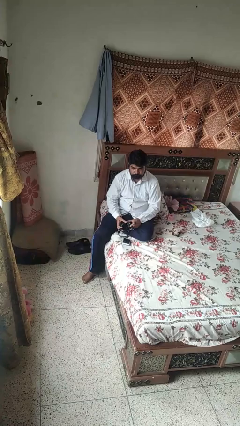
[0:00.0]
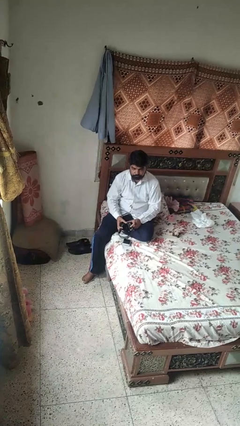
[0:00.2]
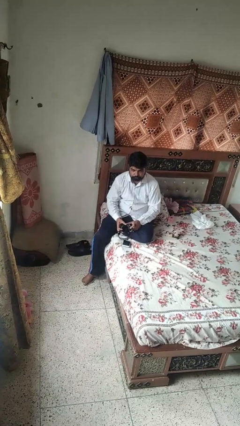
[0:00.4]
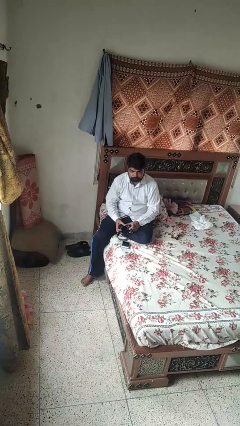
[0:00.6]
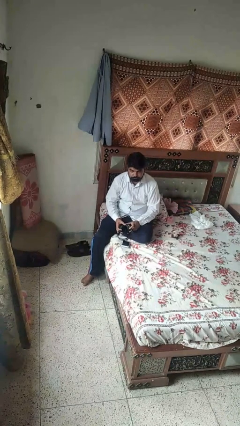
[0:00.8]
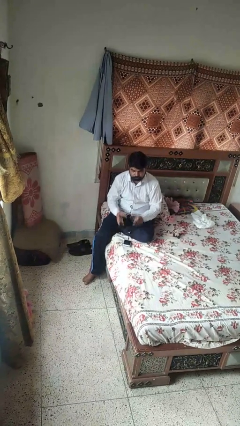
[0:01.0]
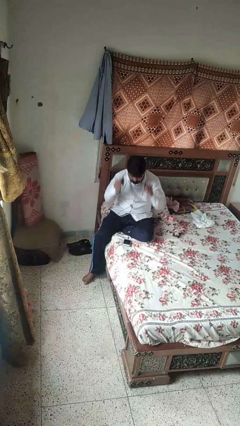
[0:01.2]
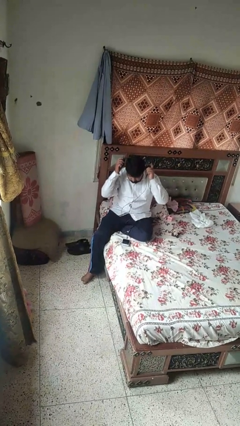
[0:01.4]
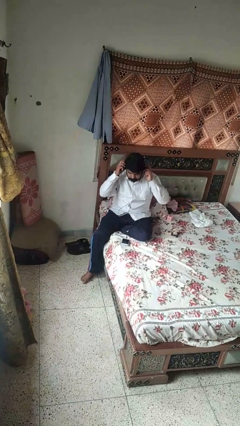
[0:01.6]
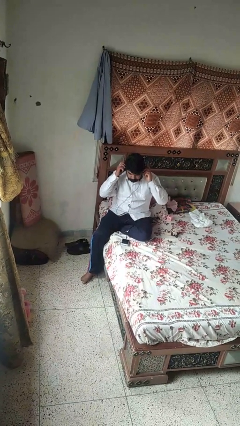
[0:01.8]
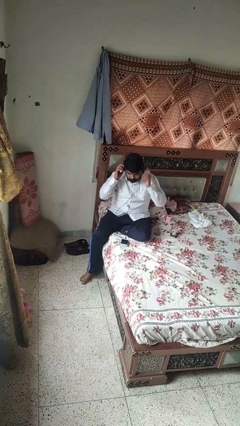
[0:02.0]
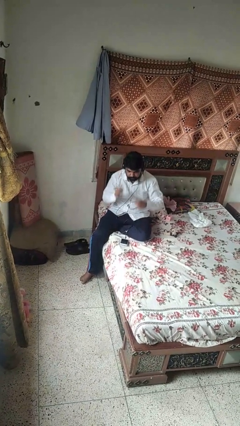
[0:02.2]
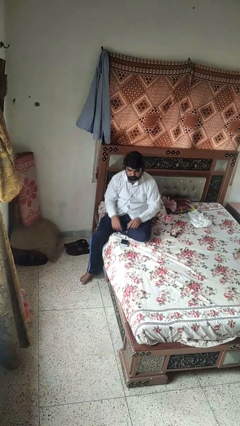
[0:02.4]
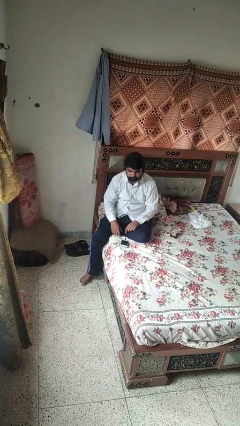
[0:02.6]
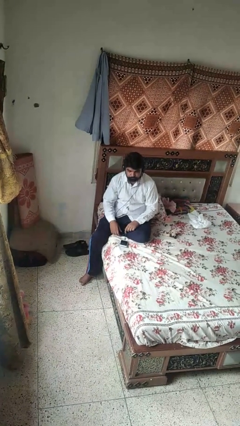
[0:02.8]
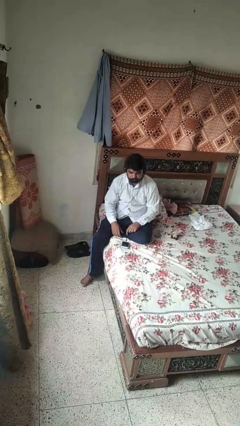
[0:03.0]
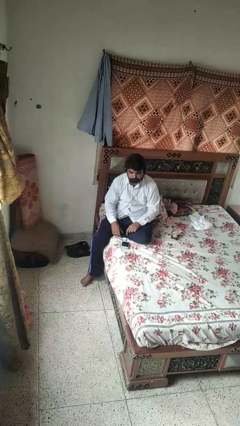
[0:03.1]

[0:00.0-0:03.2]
person puts on headphones

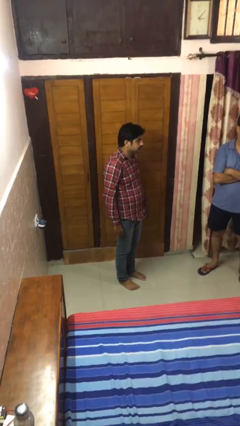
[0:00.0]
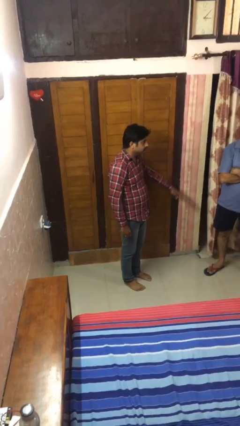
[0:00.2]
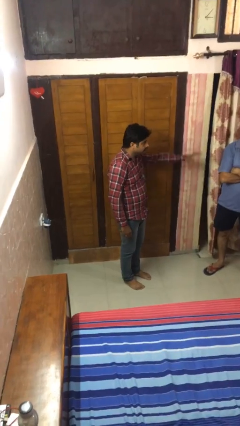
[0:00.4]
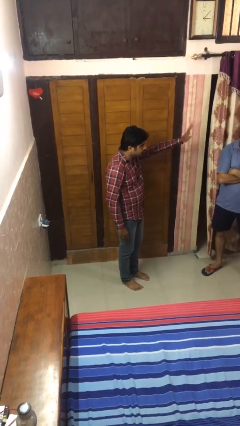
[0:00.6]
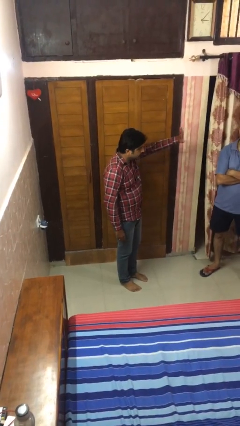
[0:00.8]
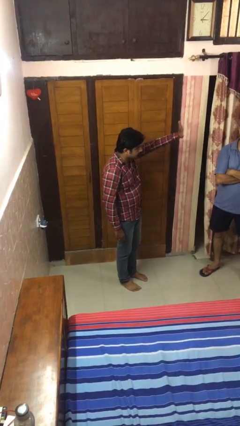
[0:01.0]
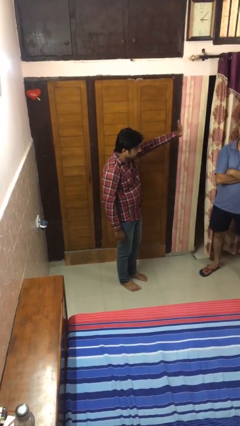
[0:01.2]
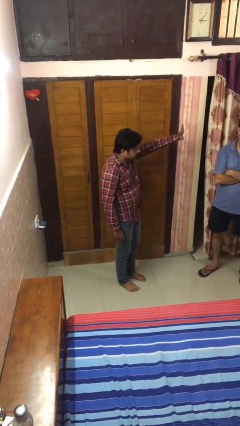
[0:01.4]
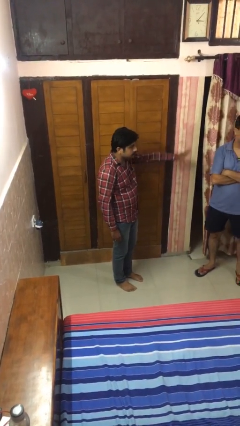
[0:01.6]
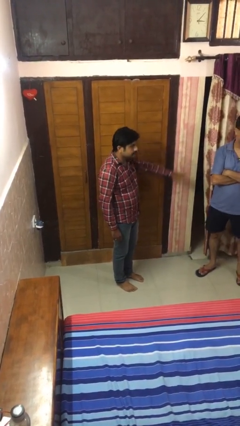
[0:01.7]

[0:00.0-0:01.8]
person waves at person

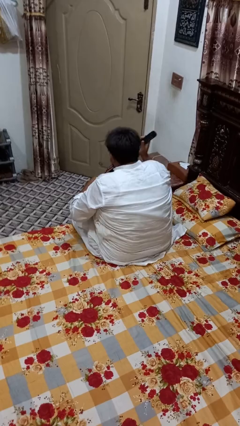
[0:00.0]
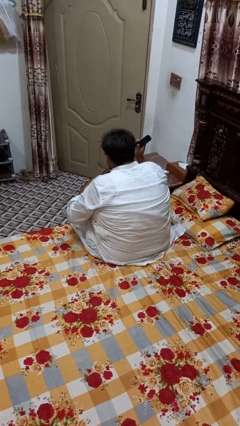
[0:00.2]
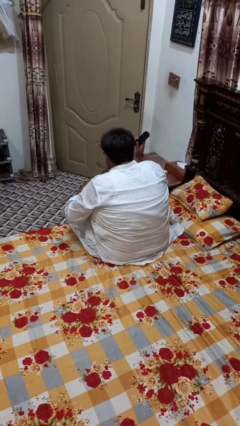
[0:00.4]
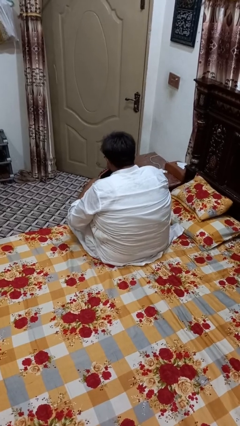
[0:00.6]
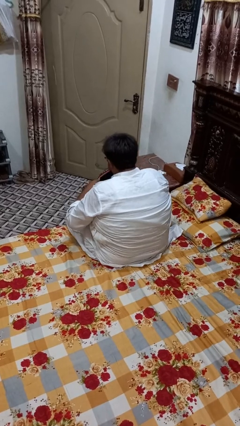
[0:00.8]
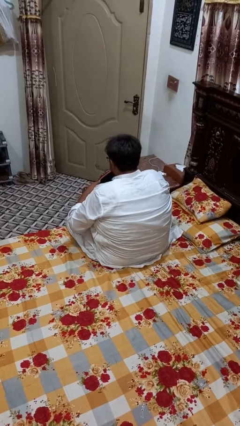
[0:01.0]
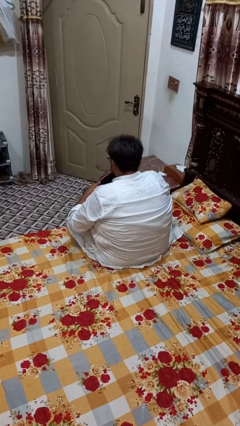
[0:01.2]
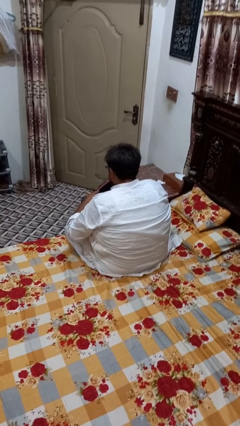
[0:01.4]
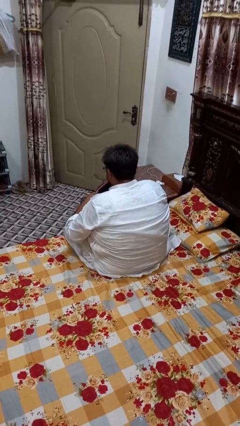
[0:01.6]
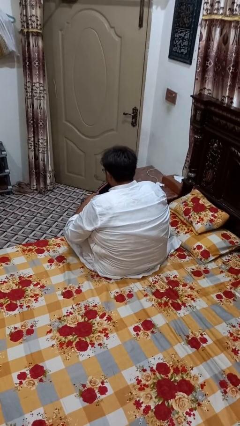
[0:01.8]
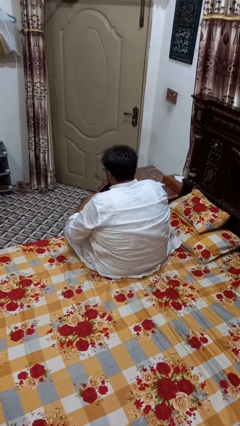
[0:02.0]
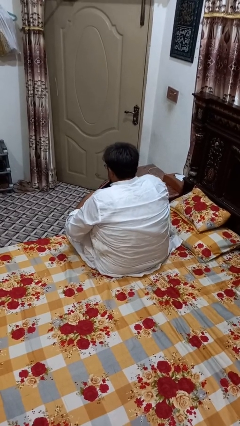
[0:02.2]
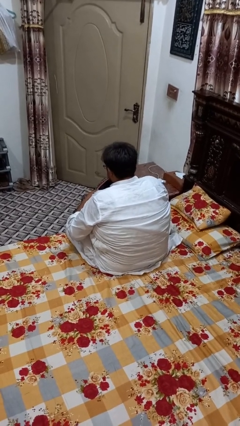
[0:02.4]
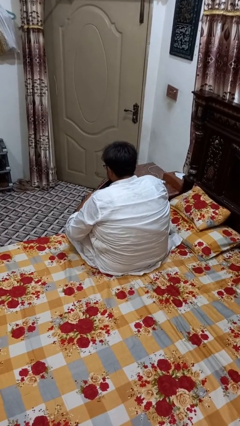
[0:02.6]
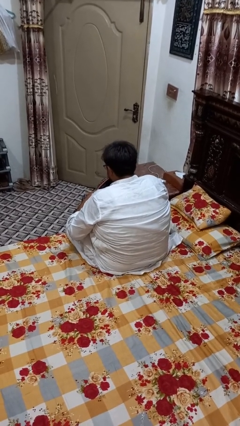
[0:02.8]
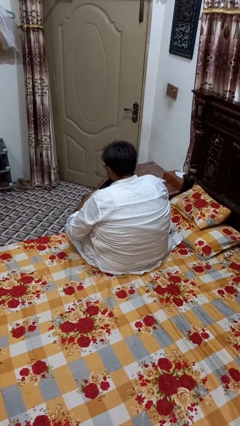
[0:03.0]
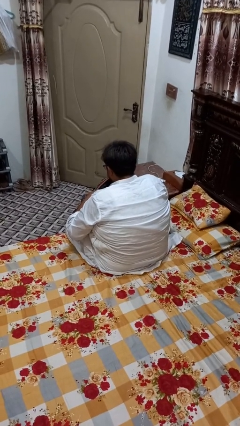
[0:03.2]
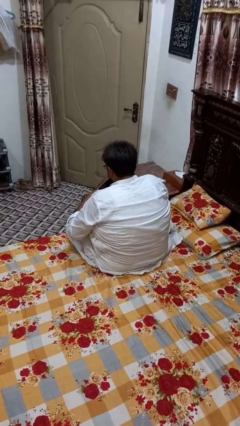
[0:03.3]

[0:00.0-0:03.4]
person puts object into bag

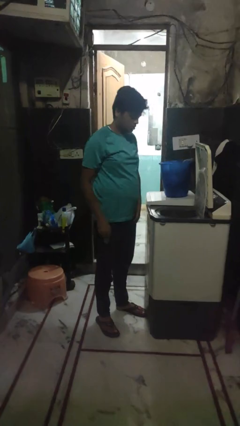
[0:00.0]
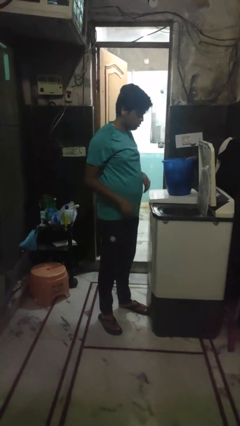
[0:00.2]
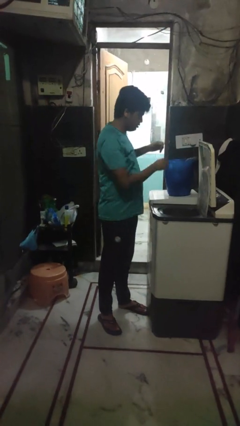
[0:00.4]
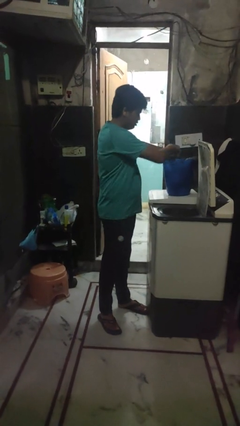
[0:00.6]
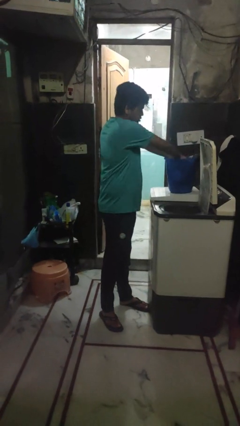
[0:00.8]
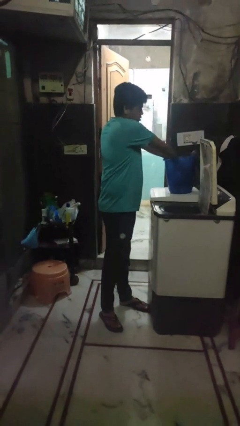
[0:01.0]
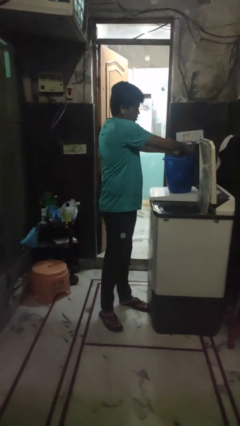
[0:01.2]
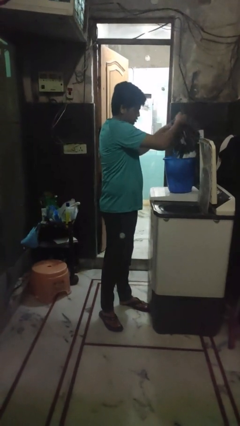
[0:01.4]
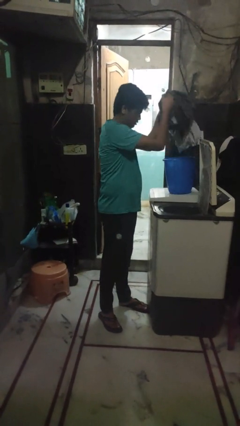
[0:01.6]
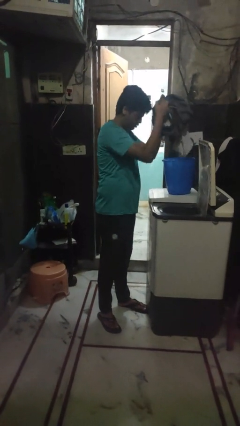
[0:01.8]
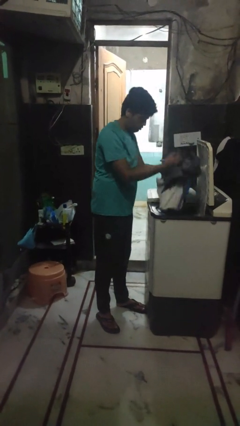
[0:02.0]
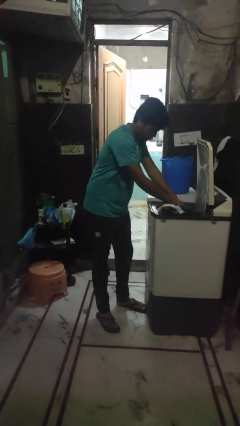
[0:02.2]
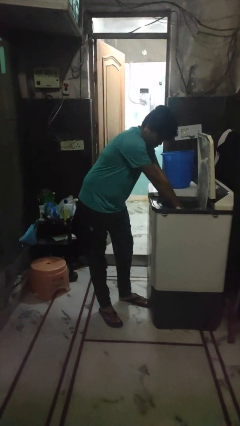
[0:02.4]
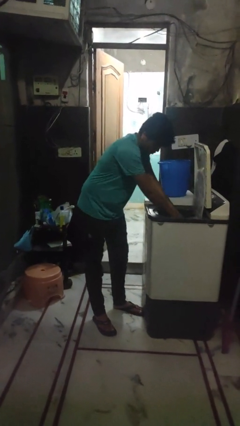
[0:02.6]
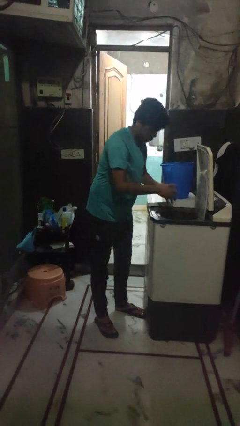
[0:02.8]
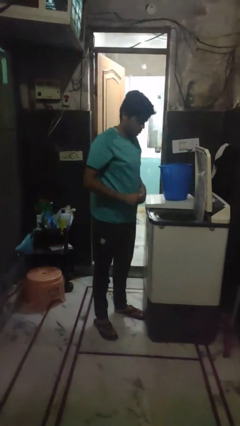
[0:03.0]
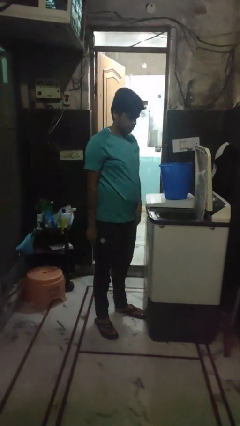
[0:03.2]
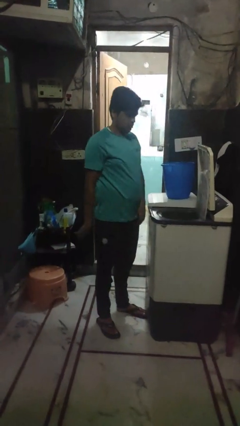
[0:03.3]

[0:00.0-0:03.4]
person loads clotheswasher

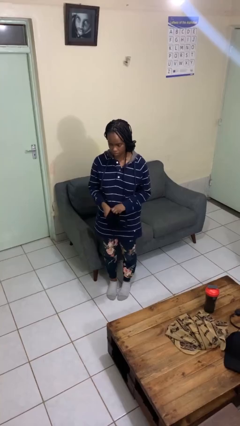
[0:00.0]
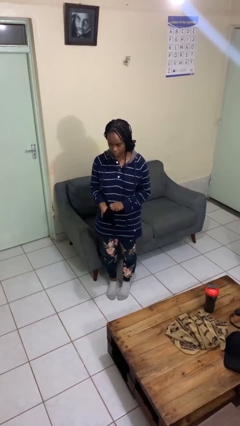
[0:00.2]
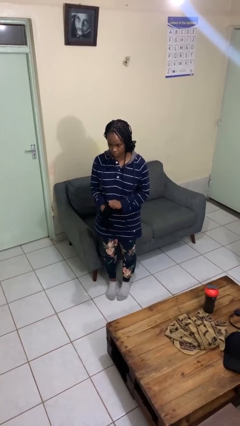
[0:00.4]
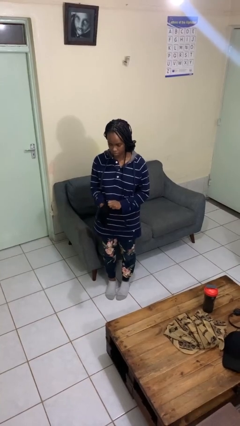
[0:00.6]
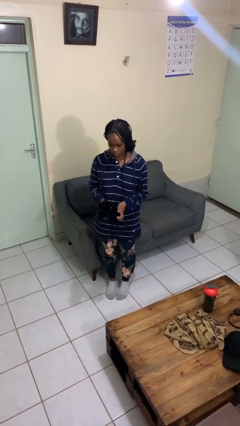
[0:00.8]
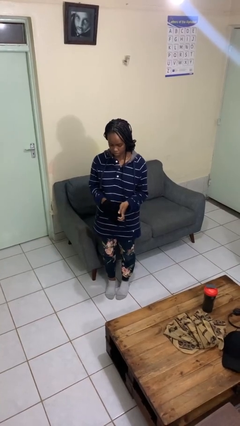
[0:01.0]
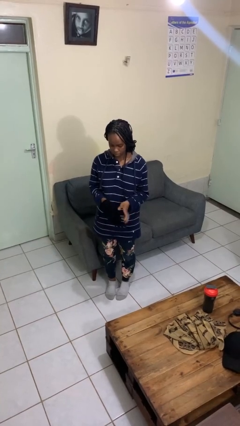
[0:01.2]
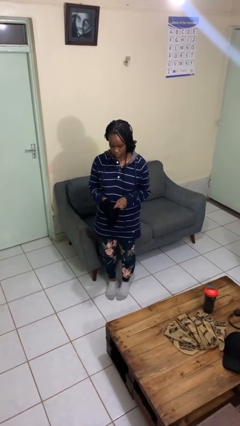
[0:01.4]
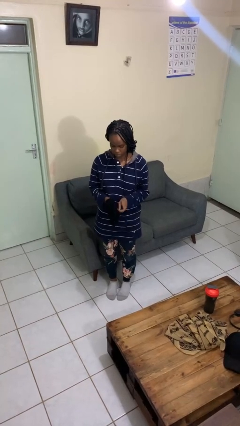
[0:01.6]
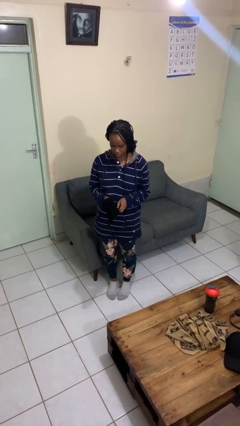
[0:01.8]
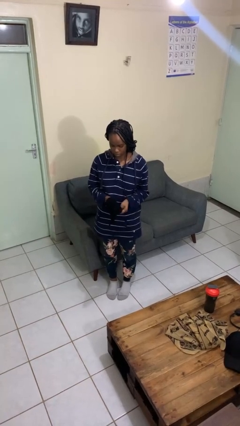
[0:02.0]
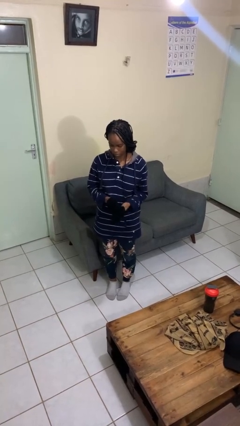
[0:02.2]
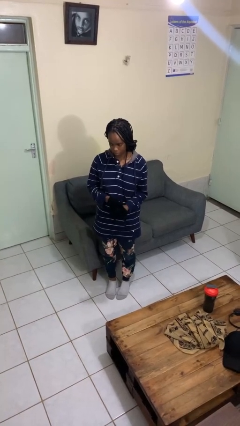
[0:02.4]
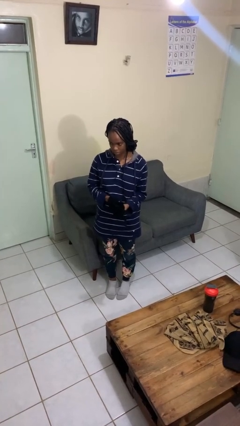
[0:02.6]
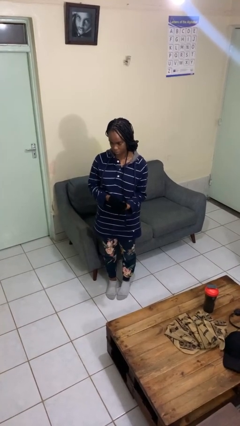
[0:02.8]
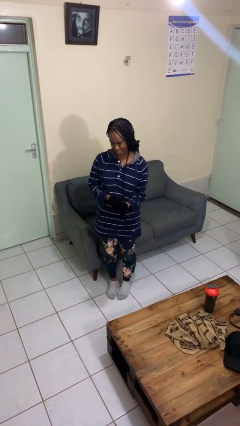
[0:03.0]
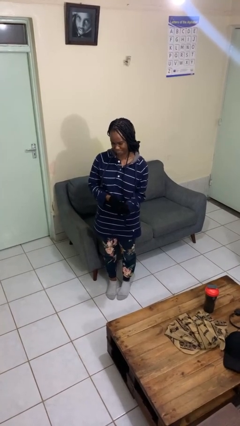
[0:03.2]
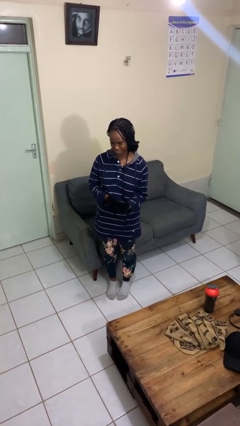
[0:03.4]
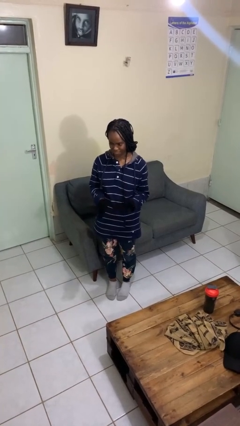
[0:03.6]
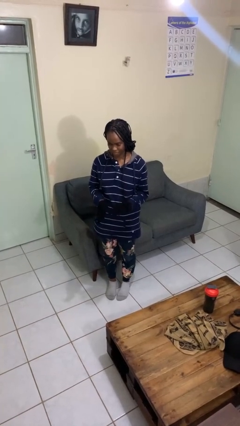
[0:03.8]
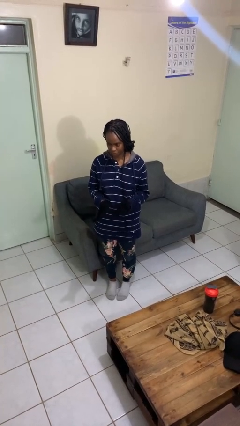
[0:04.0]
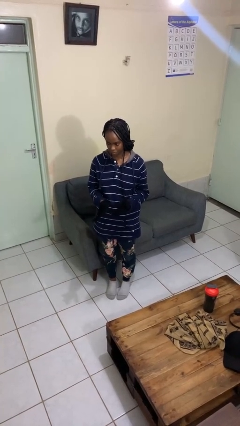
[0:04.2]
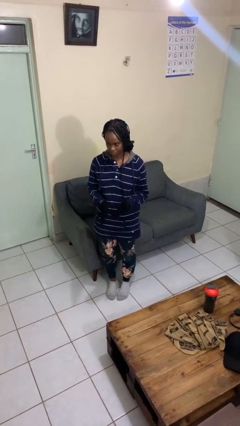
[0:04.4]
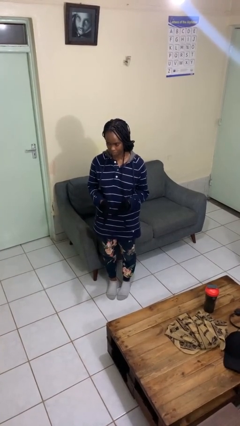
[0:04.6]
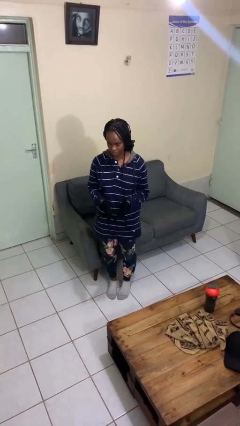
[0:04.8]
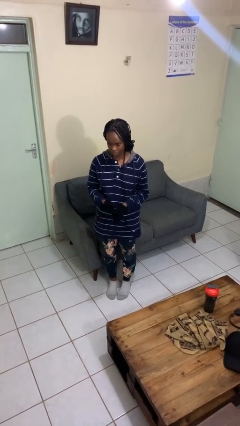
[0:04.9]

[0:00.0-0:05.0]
person puts on gloves

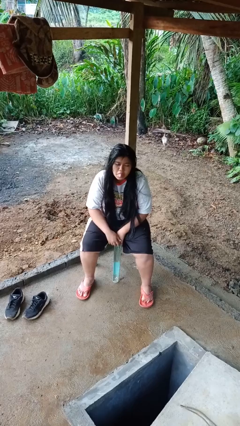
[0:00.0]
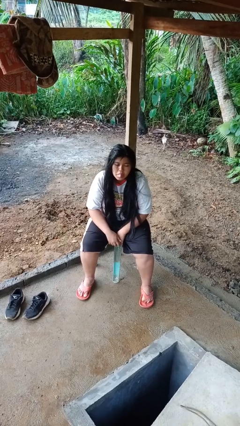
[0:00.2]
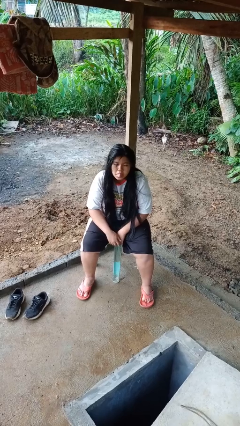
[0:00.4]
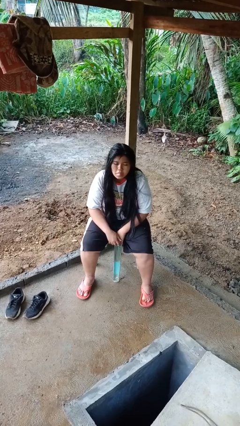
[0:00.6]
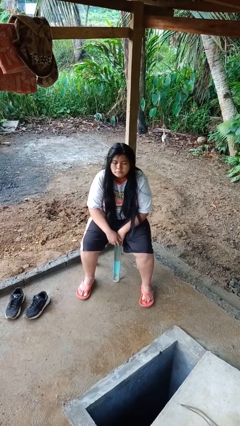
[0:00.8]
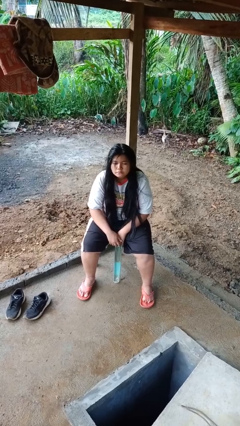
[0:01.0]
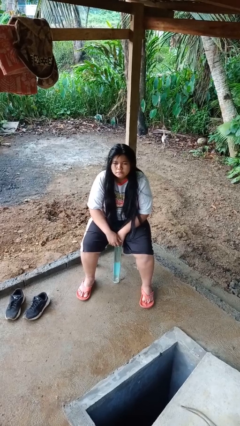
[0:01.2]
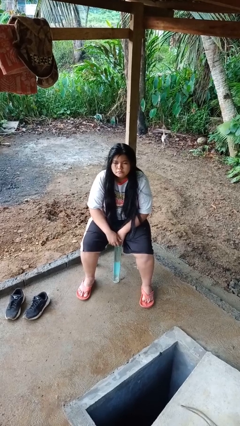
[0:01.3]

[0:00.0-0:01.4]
person sticks out tongue
